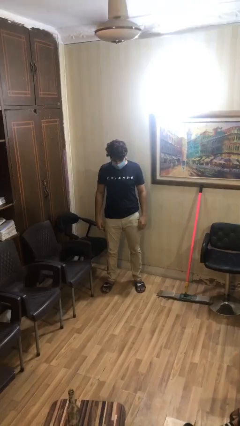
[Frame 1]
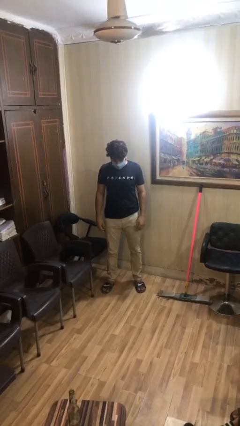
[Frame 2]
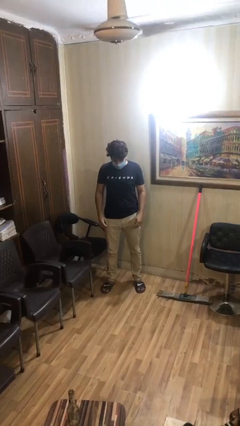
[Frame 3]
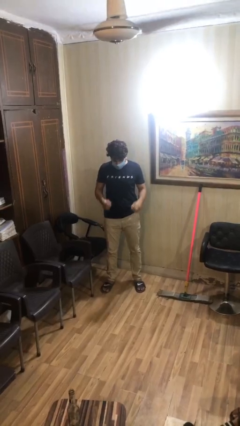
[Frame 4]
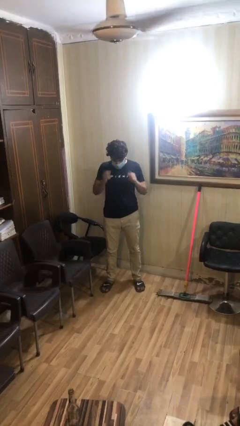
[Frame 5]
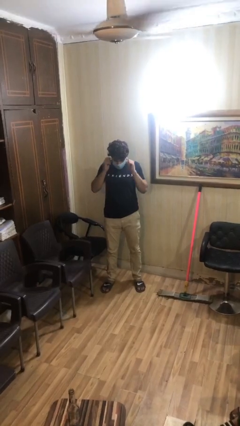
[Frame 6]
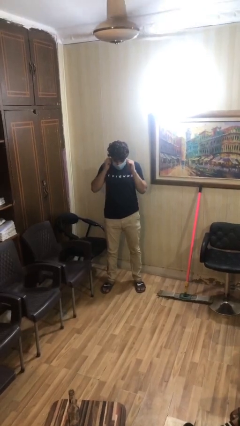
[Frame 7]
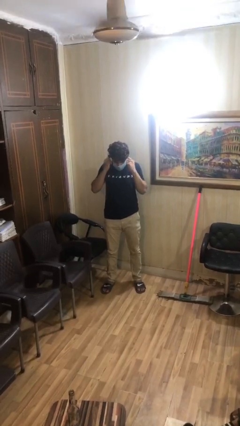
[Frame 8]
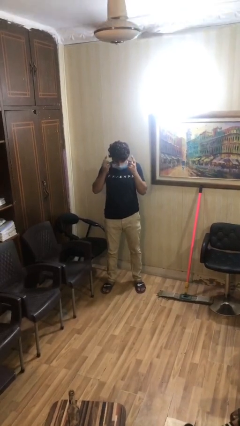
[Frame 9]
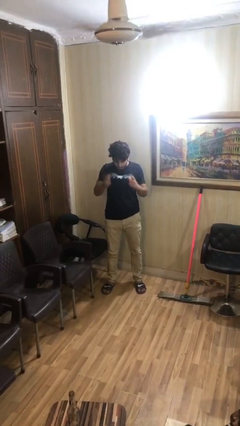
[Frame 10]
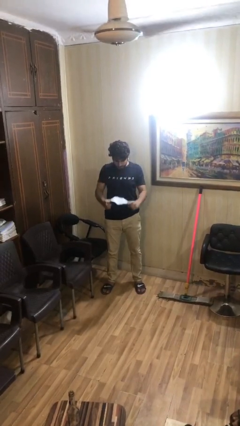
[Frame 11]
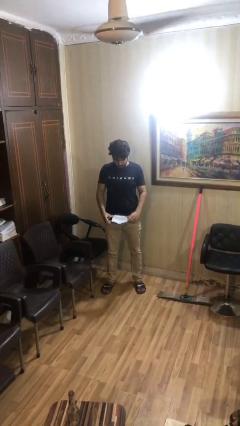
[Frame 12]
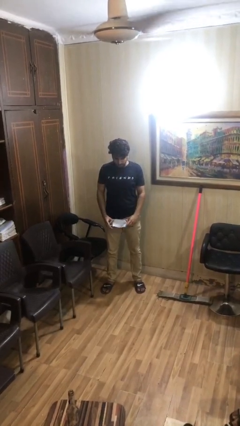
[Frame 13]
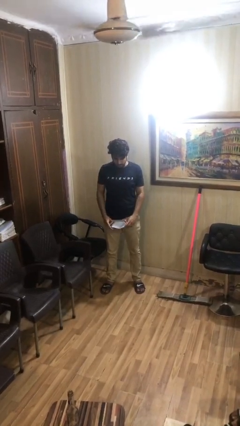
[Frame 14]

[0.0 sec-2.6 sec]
person takes off facemask

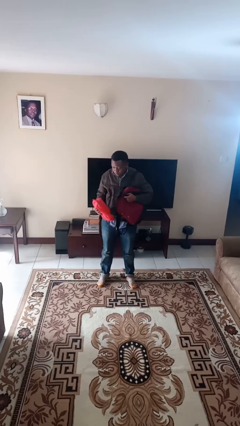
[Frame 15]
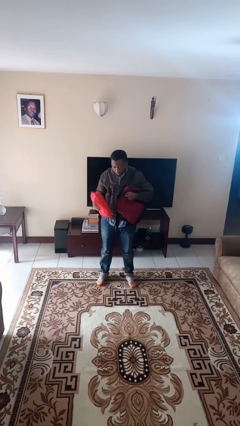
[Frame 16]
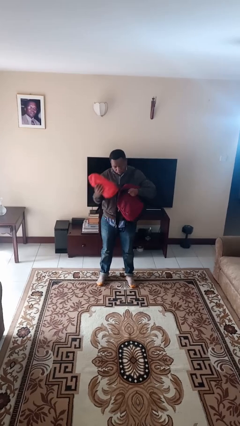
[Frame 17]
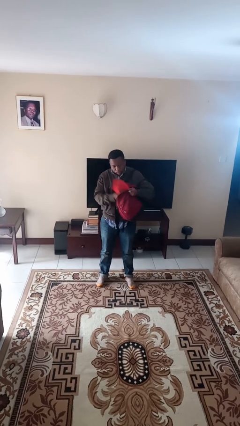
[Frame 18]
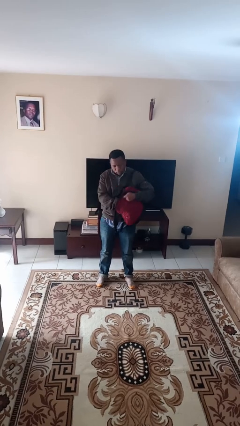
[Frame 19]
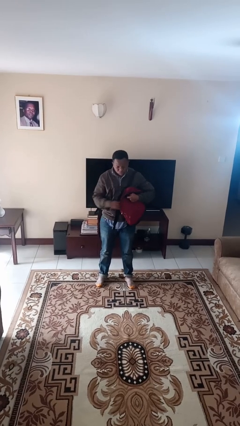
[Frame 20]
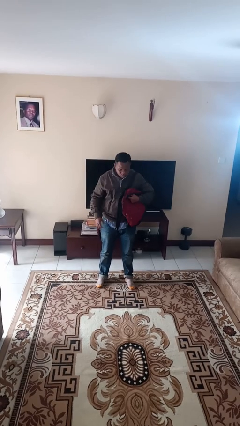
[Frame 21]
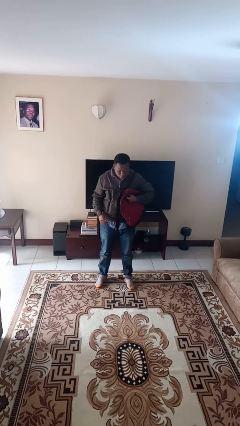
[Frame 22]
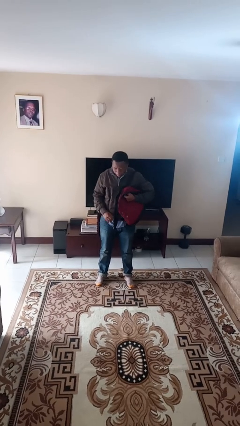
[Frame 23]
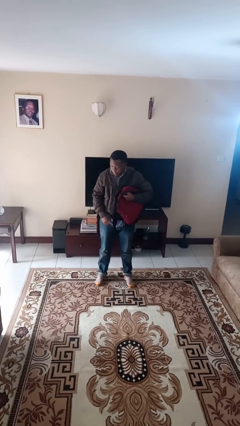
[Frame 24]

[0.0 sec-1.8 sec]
person puts object into backpack

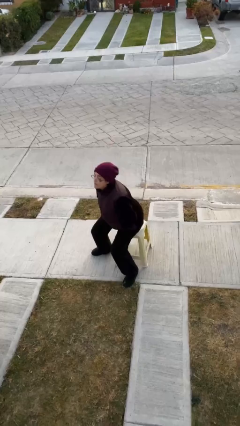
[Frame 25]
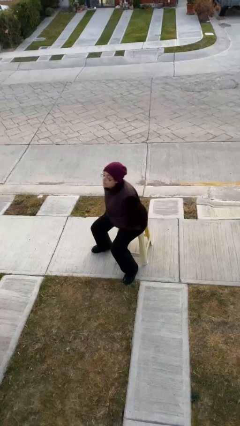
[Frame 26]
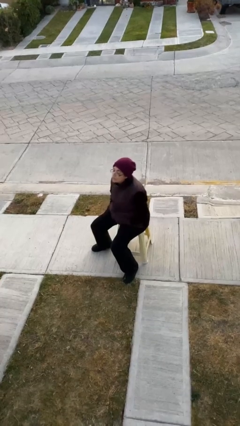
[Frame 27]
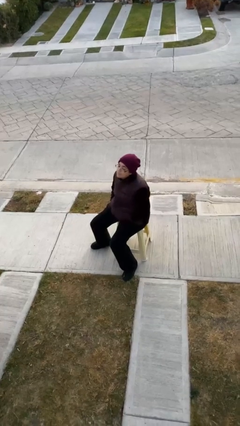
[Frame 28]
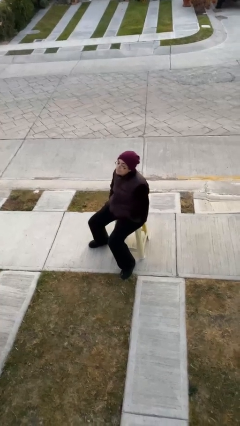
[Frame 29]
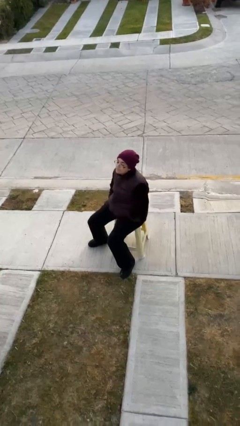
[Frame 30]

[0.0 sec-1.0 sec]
person sits down

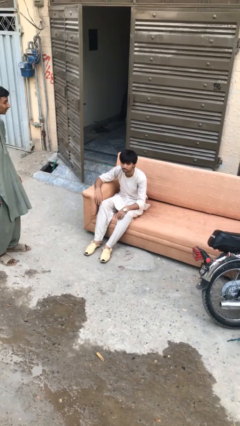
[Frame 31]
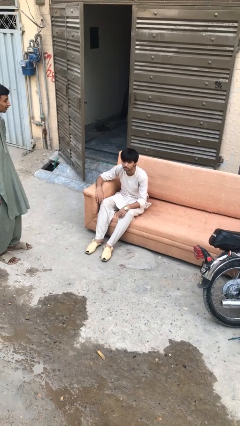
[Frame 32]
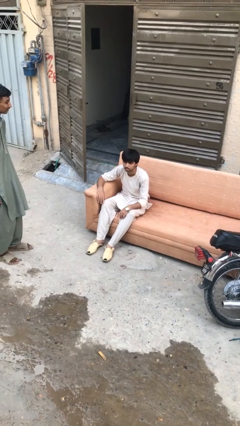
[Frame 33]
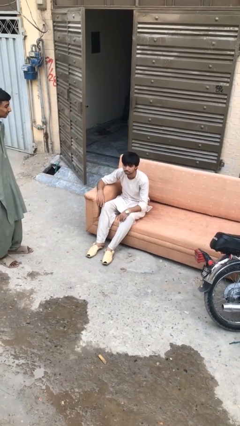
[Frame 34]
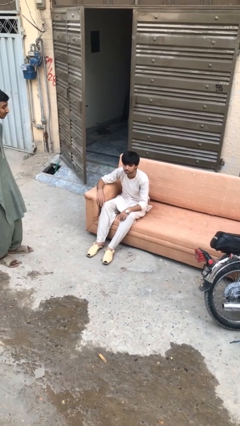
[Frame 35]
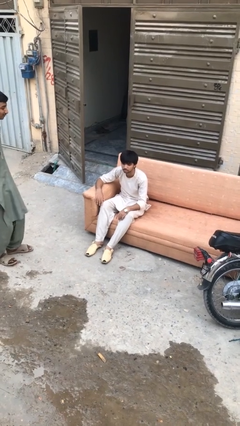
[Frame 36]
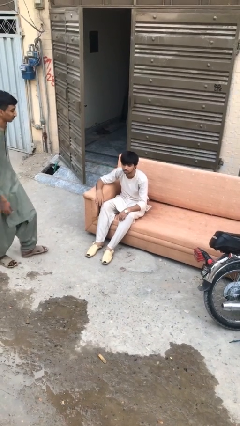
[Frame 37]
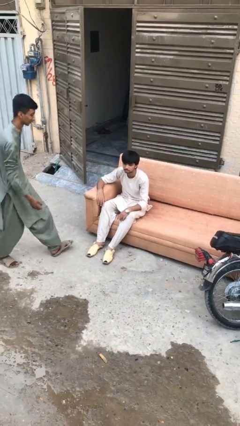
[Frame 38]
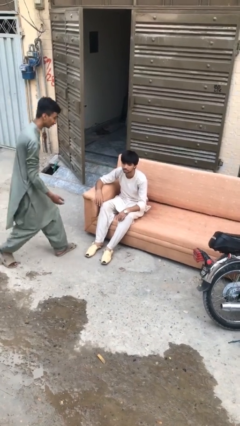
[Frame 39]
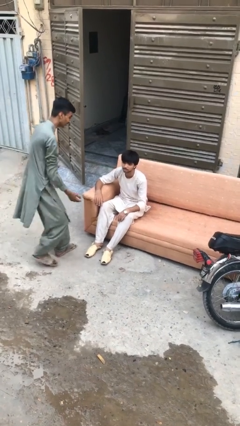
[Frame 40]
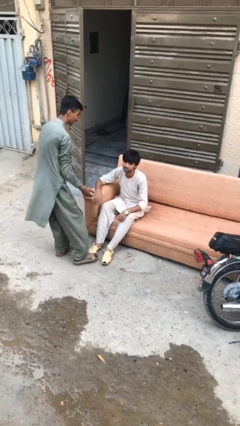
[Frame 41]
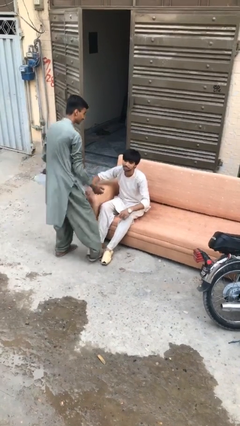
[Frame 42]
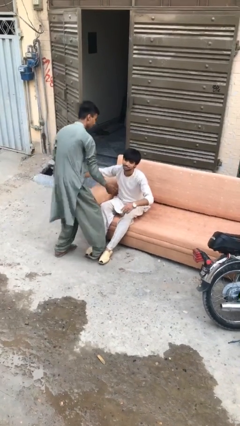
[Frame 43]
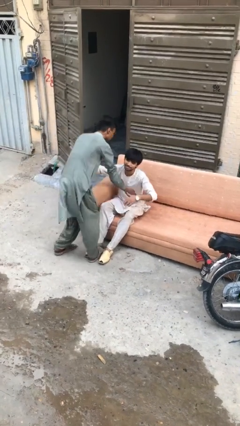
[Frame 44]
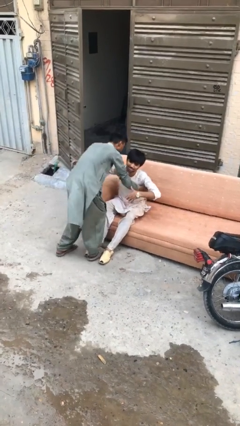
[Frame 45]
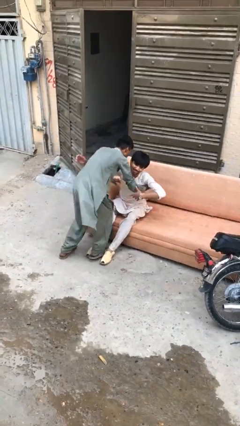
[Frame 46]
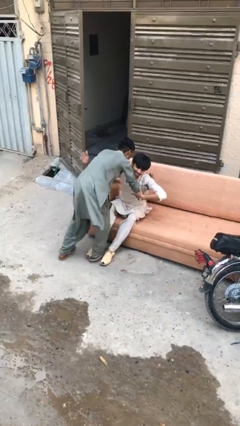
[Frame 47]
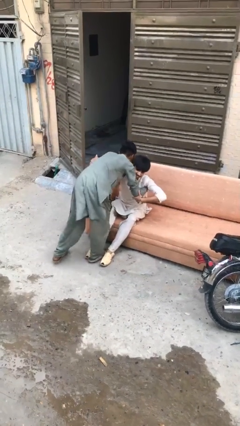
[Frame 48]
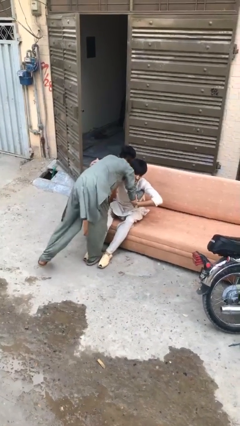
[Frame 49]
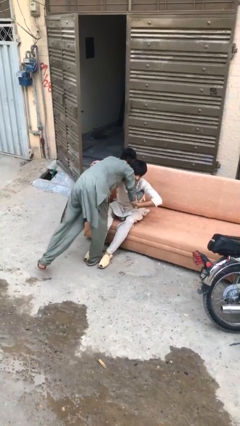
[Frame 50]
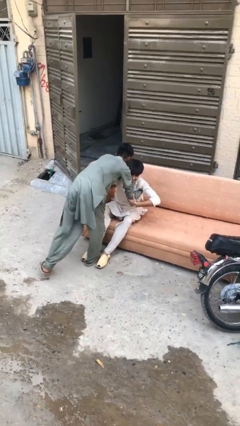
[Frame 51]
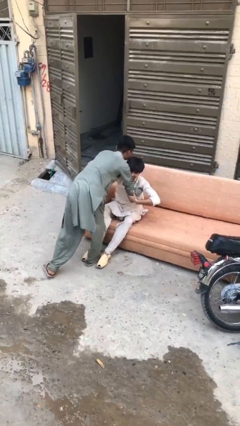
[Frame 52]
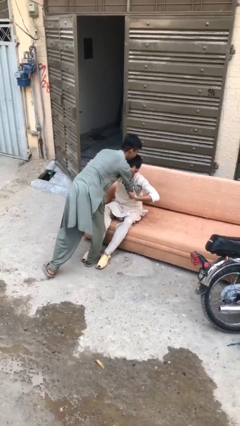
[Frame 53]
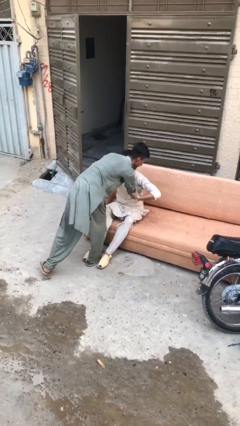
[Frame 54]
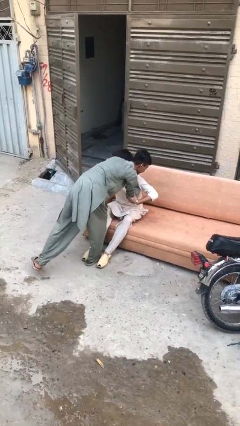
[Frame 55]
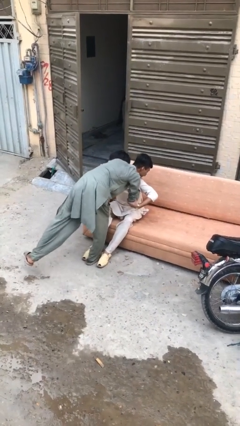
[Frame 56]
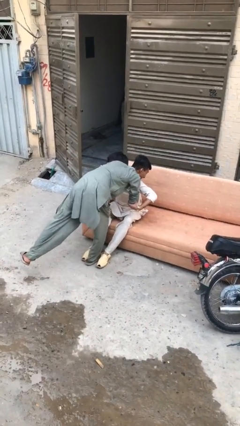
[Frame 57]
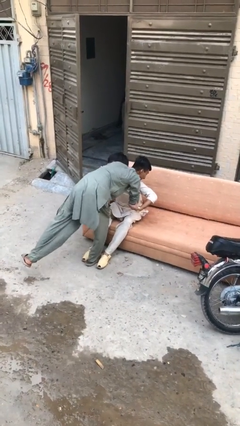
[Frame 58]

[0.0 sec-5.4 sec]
person embraces person

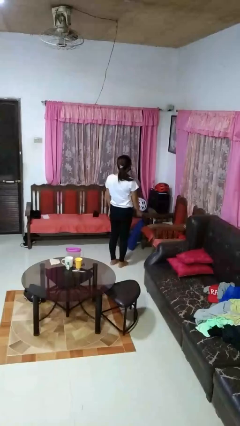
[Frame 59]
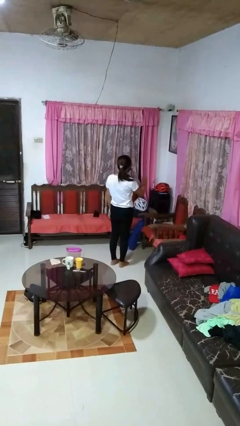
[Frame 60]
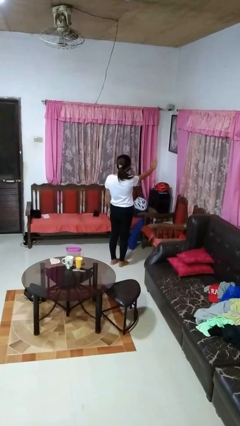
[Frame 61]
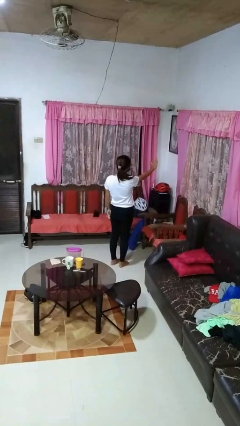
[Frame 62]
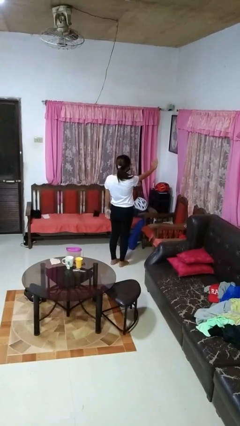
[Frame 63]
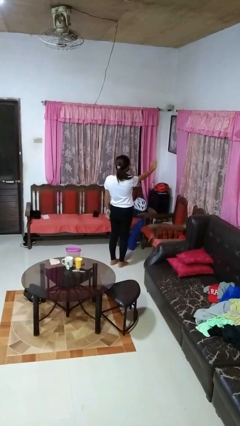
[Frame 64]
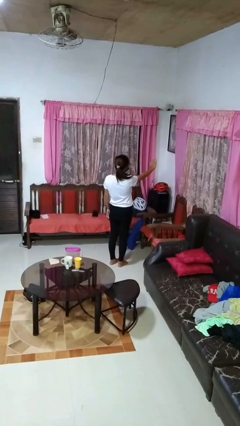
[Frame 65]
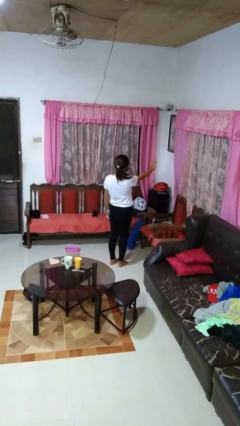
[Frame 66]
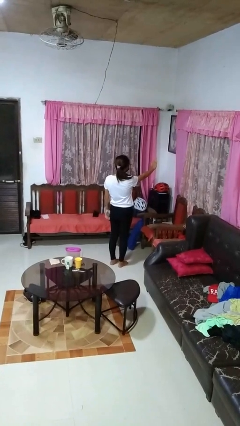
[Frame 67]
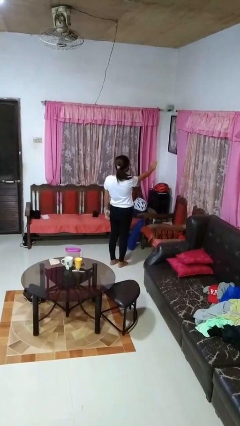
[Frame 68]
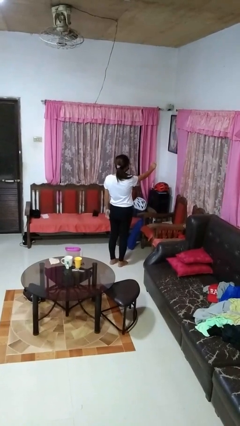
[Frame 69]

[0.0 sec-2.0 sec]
person gestures stop

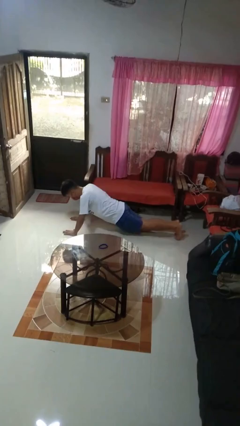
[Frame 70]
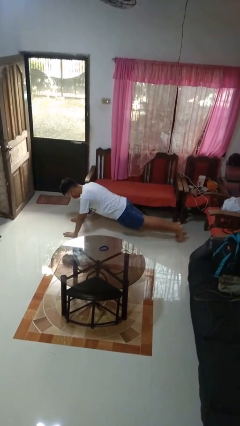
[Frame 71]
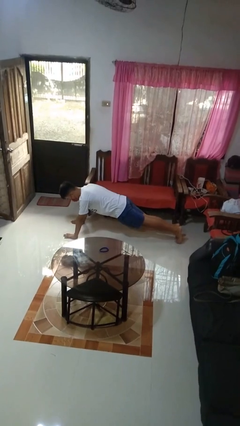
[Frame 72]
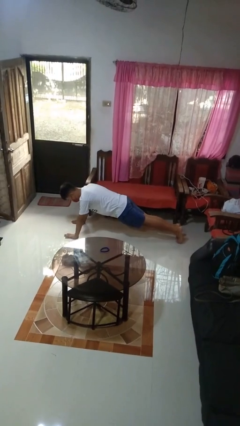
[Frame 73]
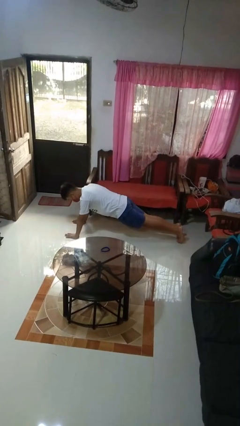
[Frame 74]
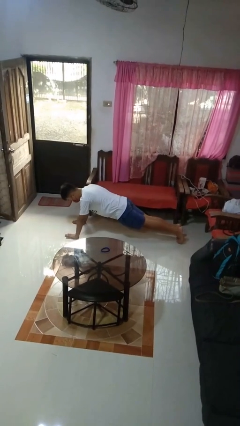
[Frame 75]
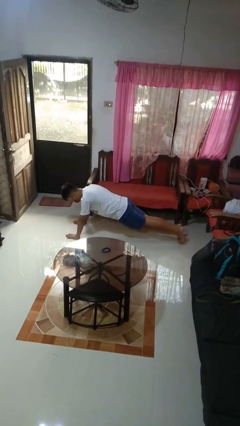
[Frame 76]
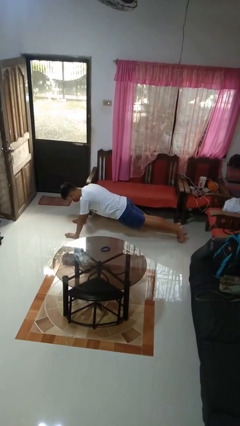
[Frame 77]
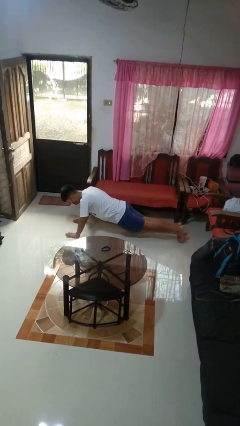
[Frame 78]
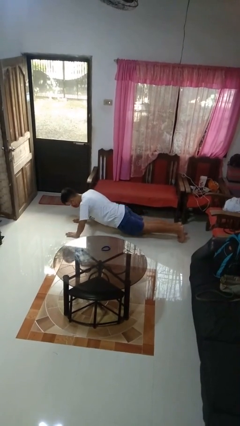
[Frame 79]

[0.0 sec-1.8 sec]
person exercises with pushup

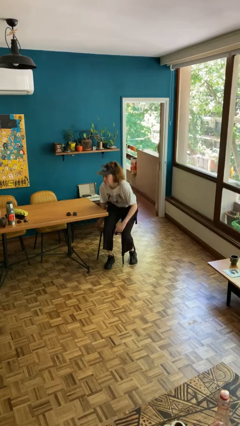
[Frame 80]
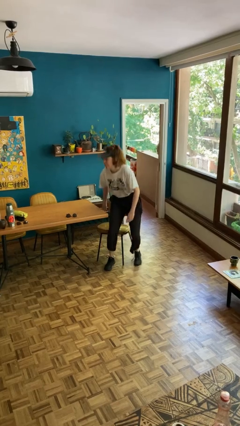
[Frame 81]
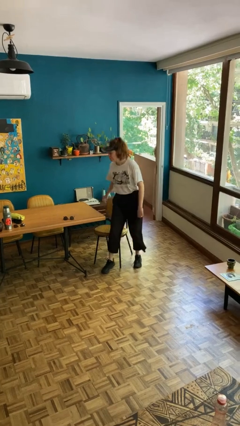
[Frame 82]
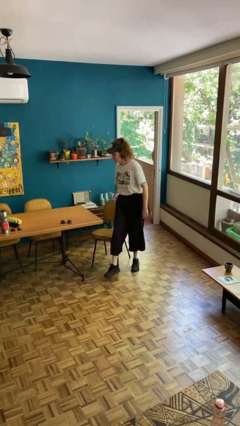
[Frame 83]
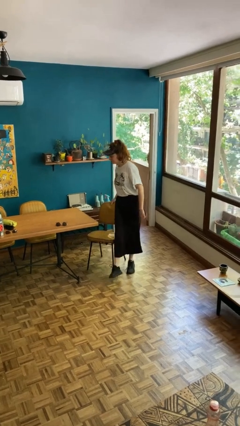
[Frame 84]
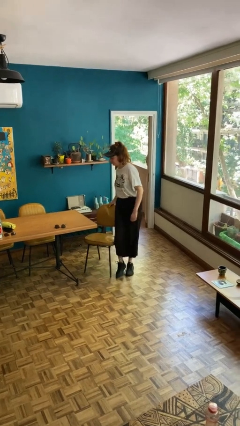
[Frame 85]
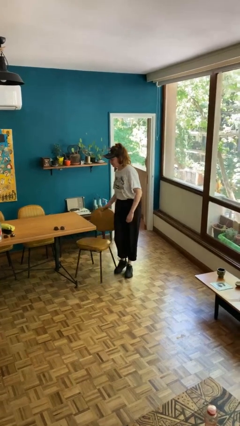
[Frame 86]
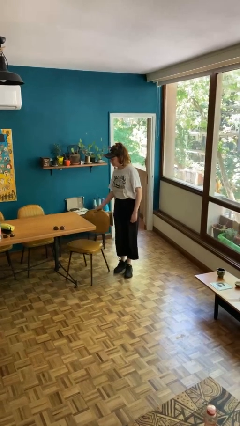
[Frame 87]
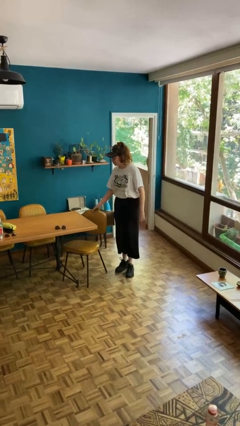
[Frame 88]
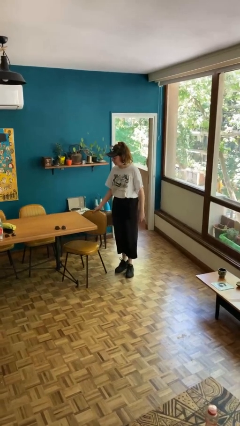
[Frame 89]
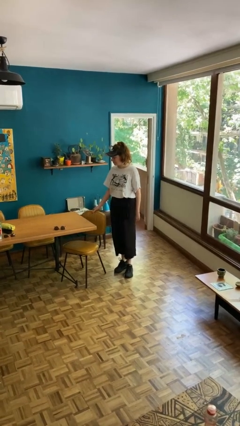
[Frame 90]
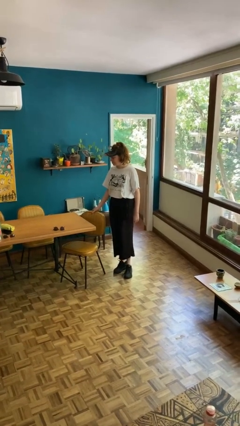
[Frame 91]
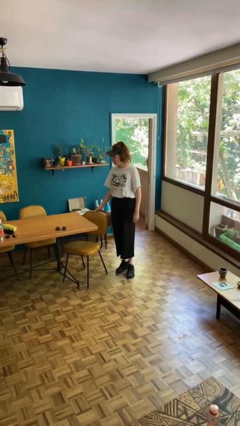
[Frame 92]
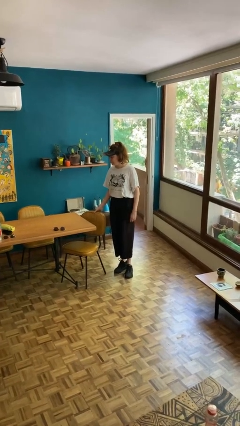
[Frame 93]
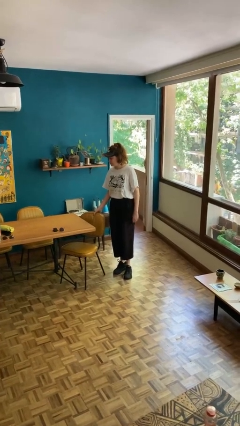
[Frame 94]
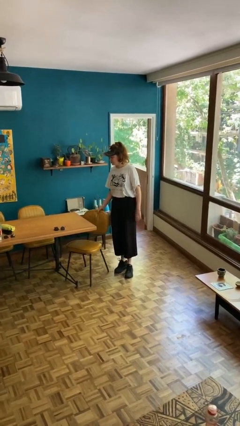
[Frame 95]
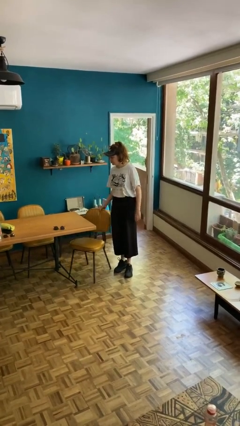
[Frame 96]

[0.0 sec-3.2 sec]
person stands up
